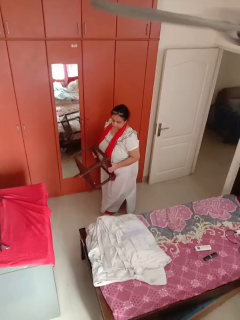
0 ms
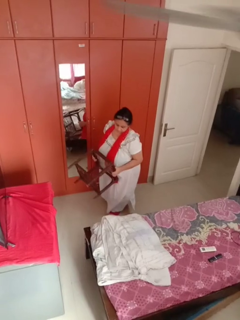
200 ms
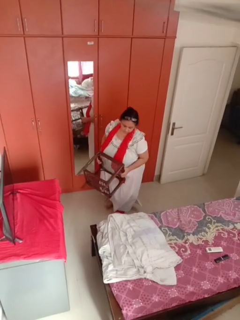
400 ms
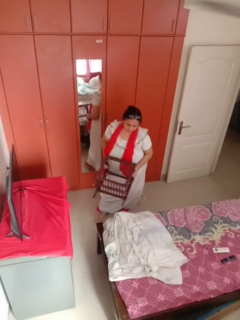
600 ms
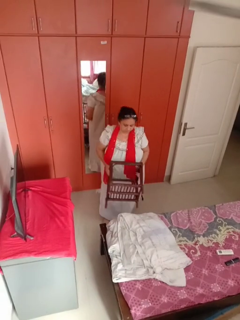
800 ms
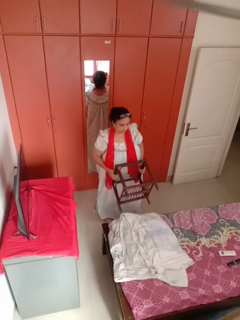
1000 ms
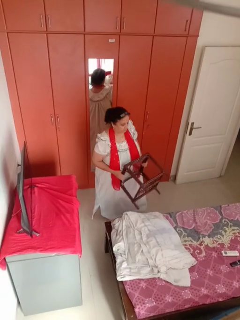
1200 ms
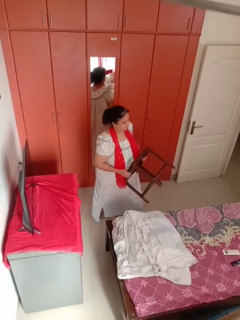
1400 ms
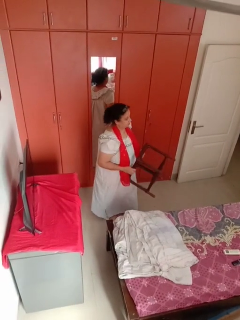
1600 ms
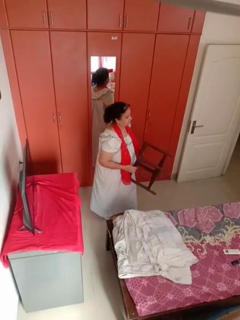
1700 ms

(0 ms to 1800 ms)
person carries furniture

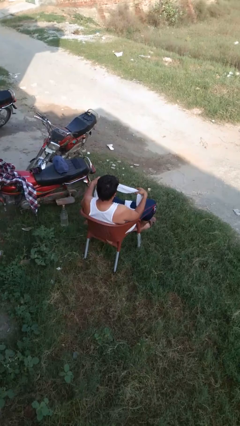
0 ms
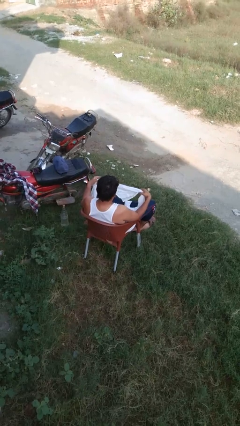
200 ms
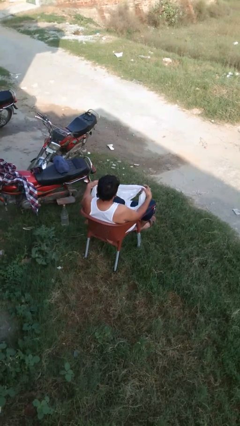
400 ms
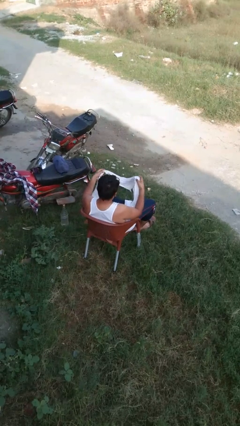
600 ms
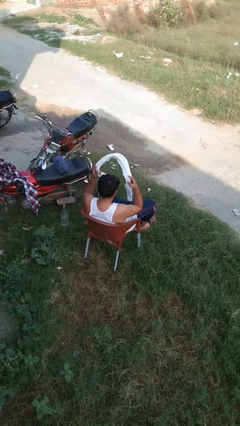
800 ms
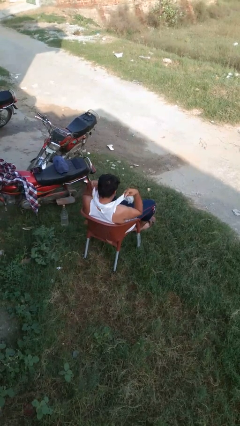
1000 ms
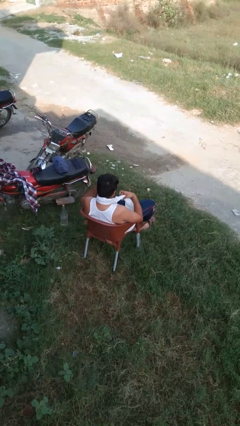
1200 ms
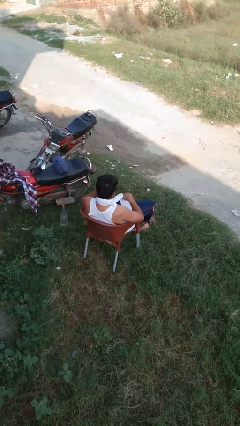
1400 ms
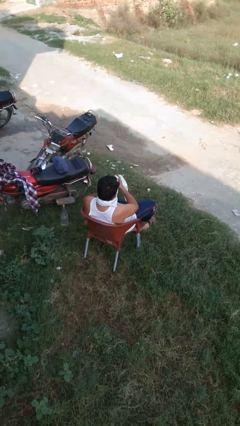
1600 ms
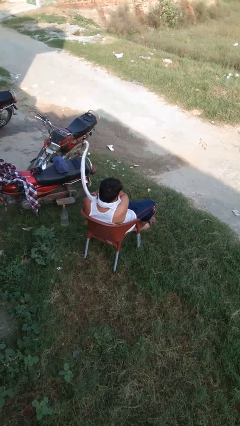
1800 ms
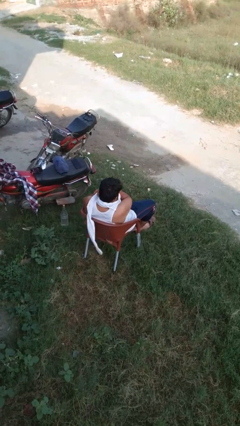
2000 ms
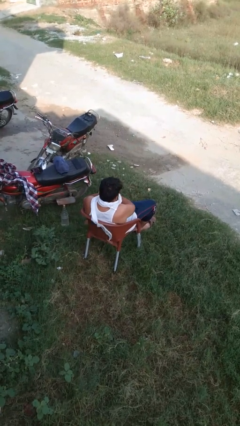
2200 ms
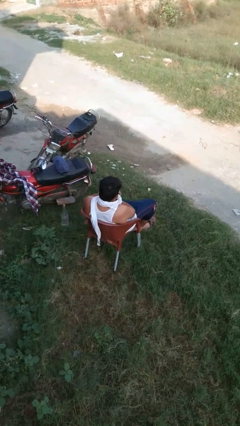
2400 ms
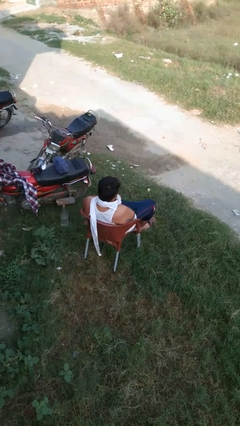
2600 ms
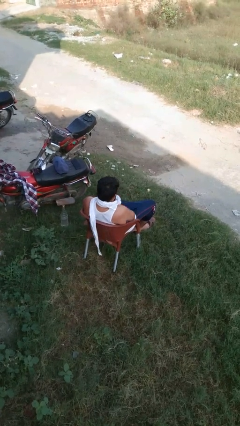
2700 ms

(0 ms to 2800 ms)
person puts on scarf

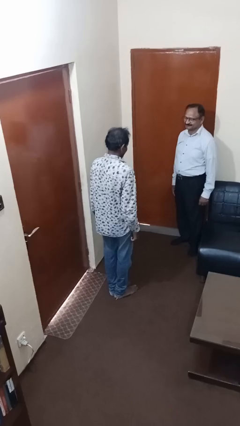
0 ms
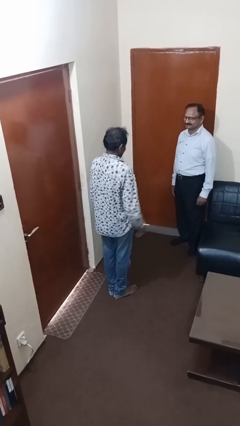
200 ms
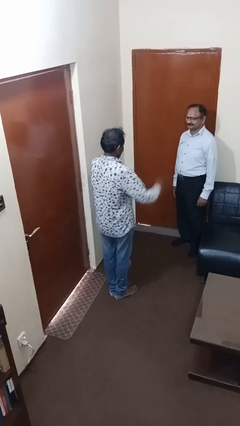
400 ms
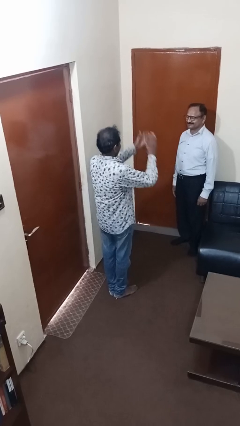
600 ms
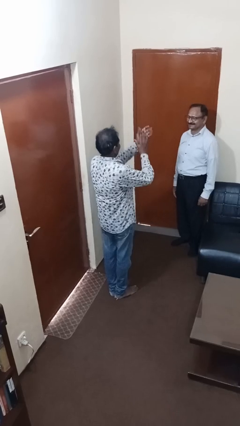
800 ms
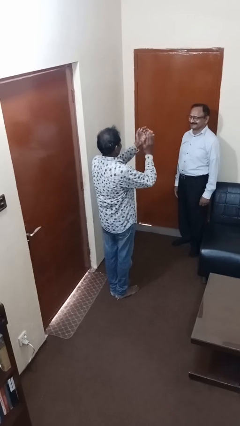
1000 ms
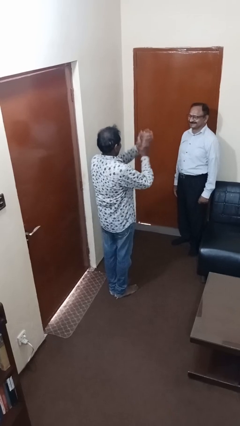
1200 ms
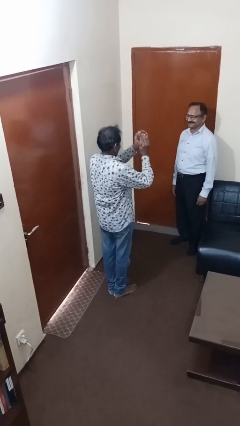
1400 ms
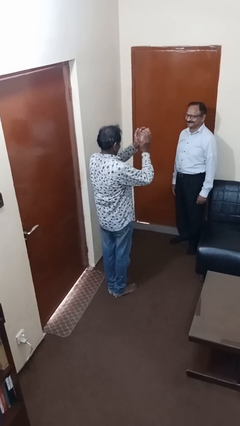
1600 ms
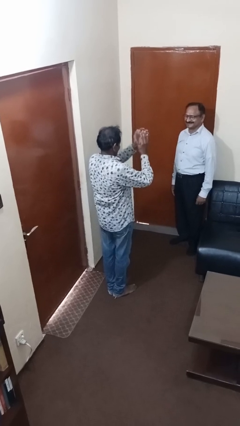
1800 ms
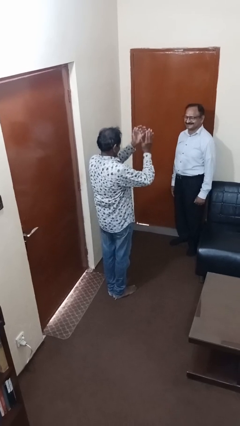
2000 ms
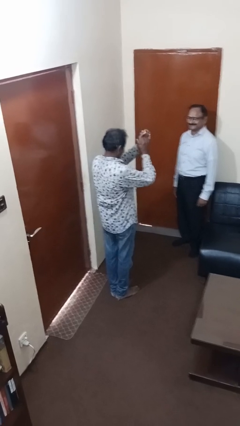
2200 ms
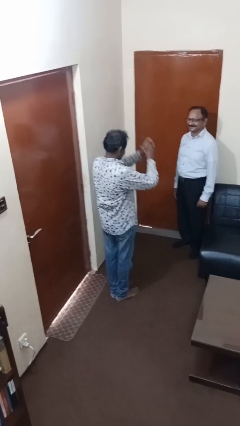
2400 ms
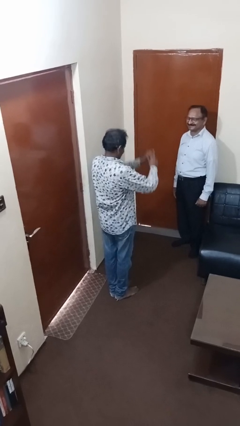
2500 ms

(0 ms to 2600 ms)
person laughs with person

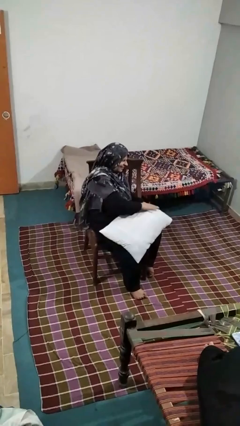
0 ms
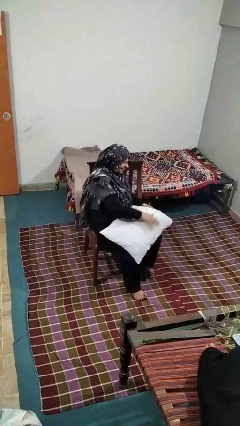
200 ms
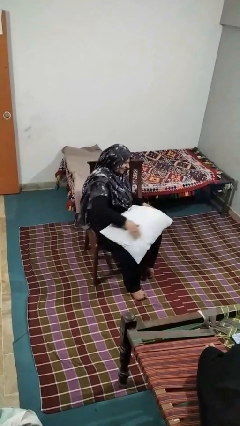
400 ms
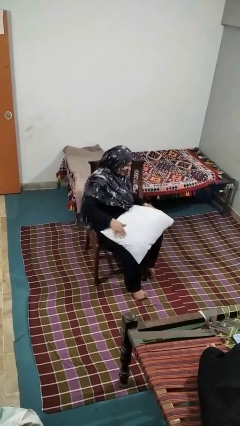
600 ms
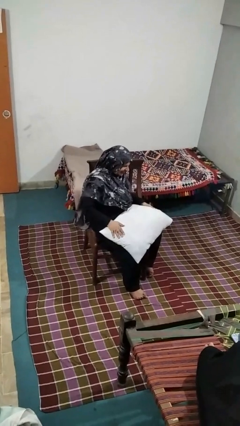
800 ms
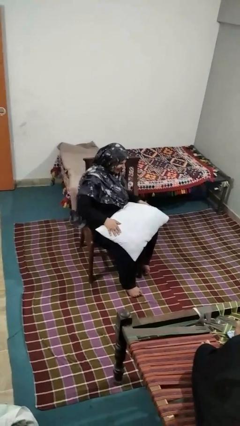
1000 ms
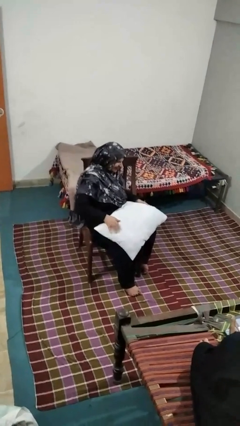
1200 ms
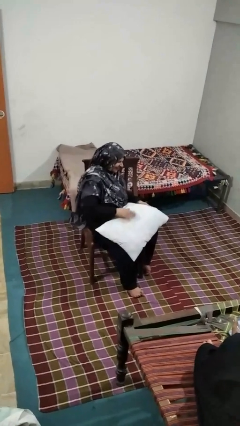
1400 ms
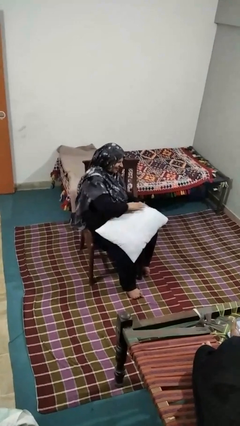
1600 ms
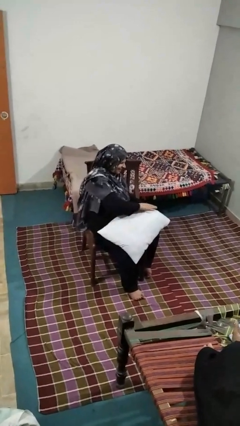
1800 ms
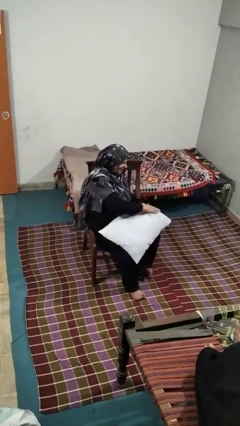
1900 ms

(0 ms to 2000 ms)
person waves hand over object

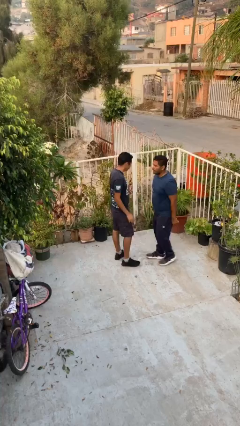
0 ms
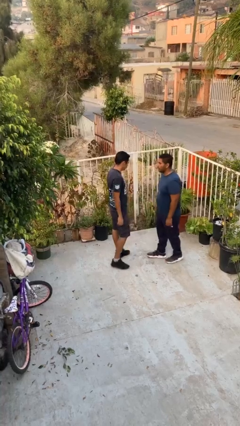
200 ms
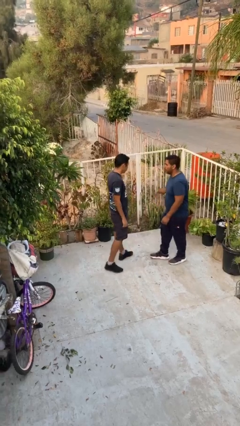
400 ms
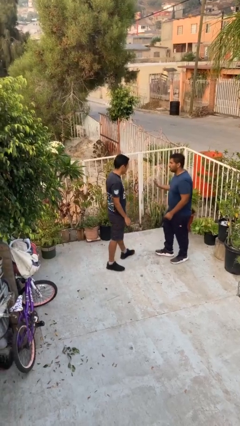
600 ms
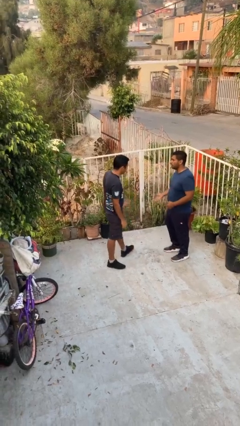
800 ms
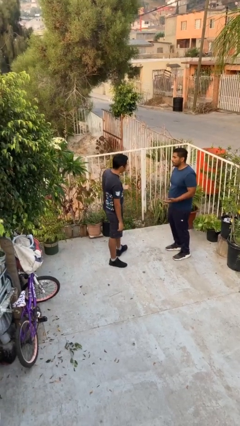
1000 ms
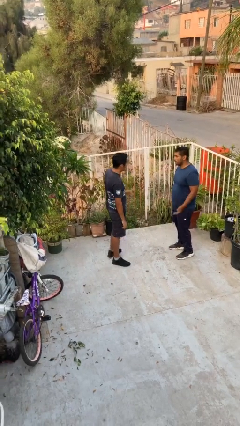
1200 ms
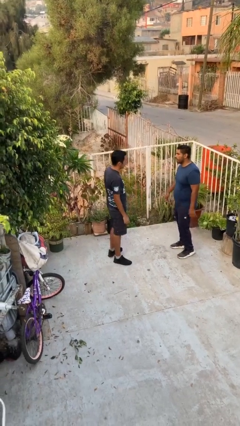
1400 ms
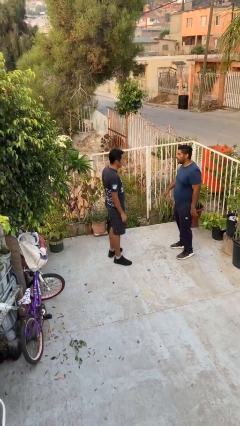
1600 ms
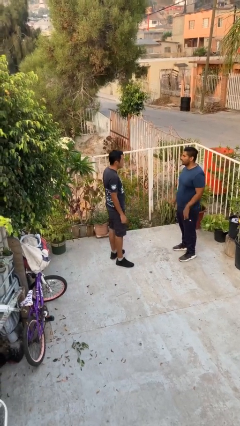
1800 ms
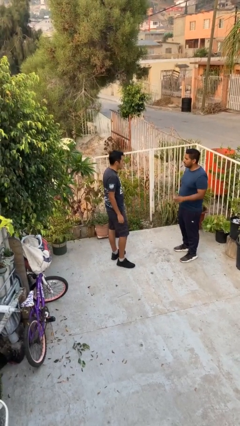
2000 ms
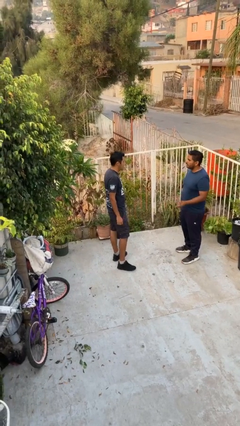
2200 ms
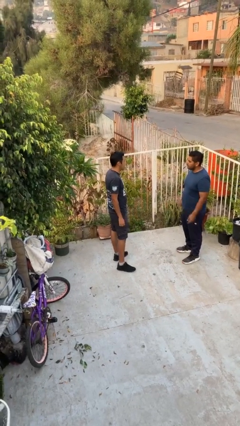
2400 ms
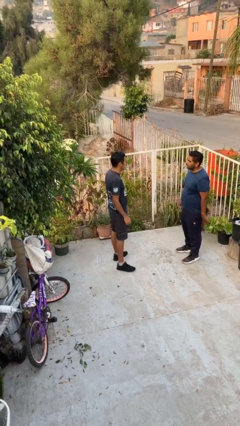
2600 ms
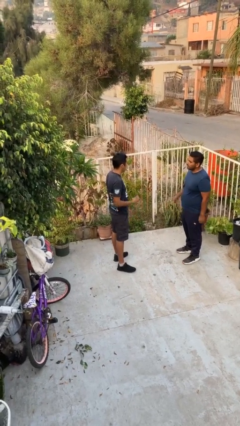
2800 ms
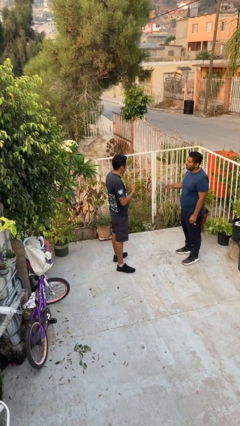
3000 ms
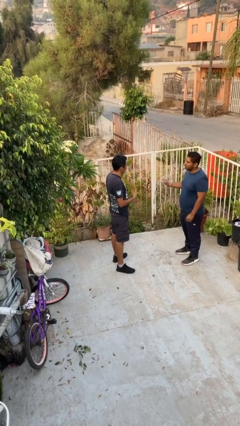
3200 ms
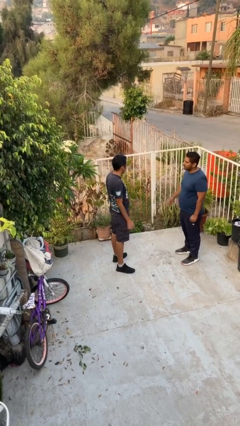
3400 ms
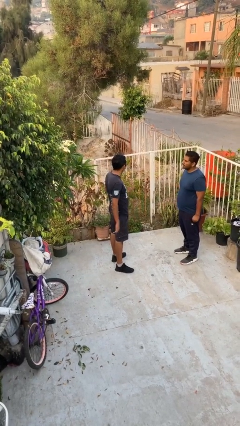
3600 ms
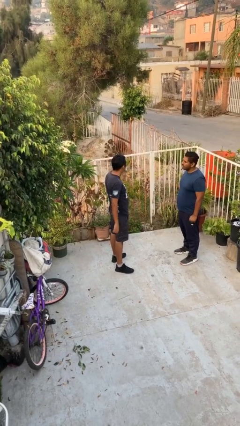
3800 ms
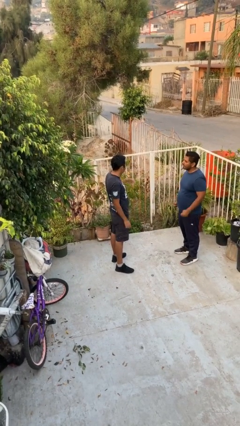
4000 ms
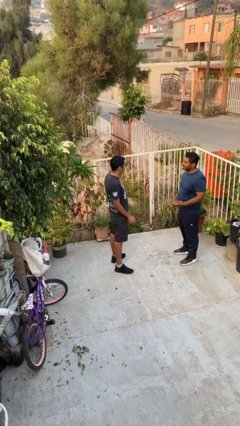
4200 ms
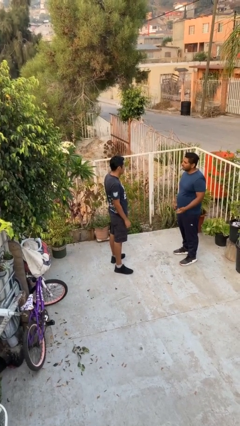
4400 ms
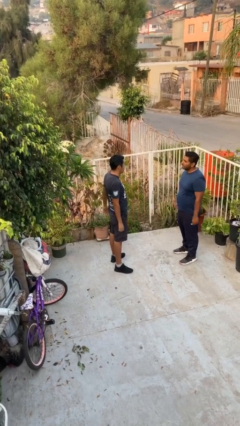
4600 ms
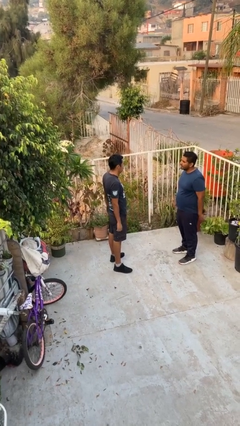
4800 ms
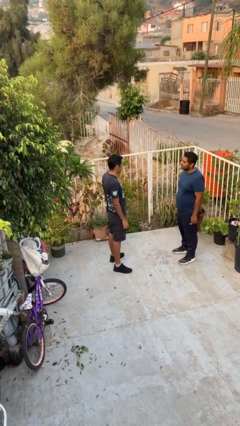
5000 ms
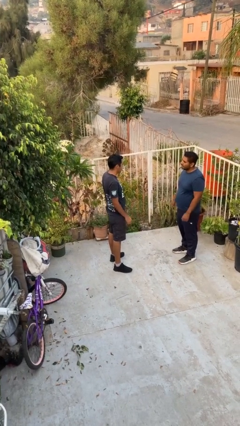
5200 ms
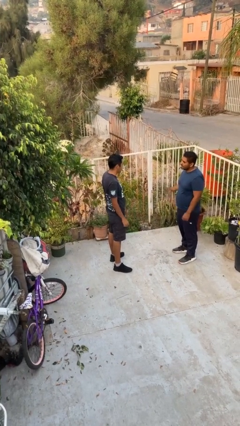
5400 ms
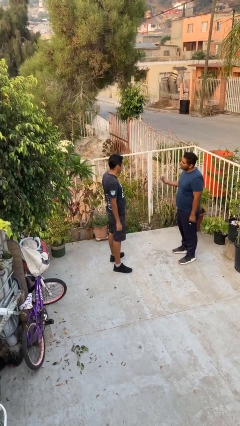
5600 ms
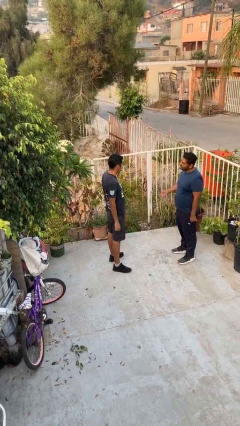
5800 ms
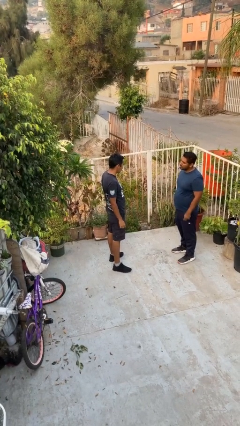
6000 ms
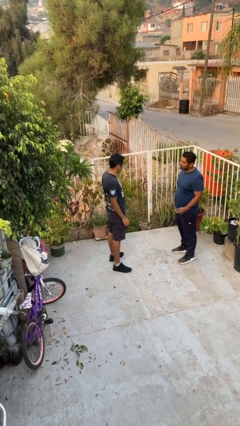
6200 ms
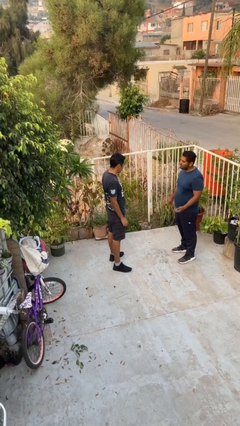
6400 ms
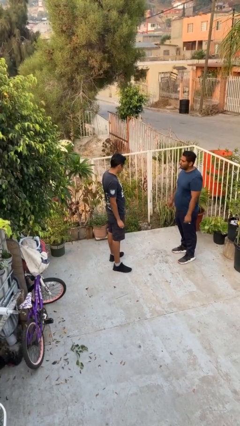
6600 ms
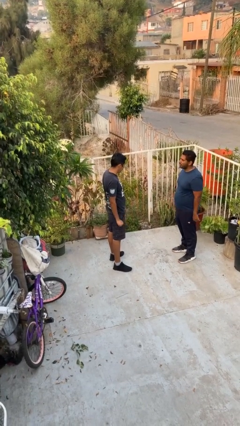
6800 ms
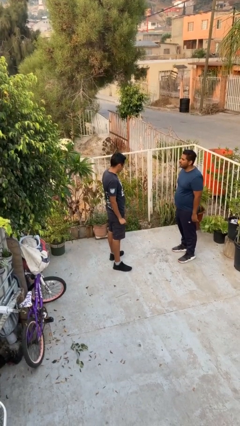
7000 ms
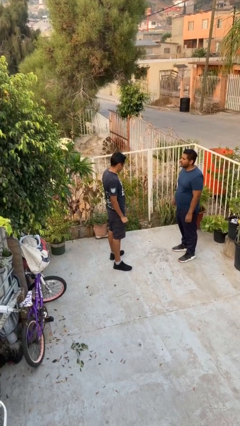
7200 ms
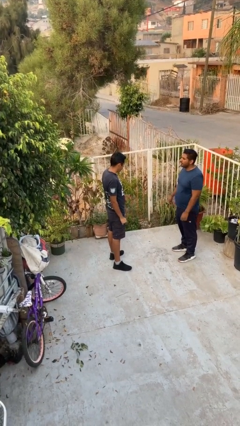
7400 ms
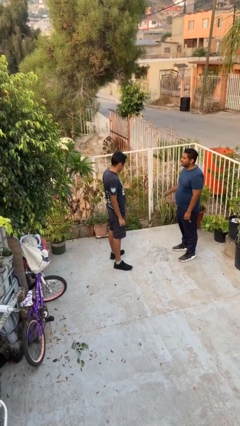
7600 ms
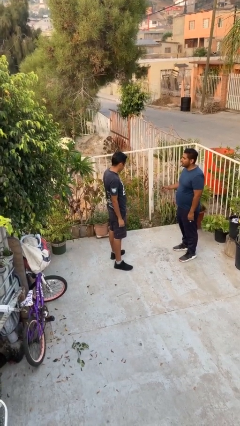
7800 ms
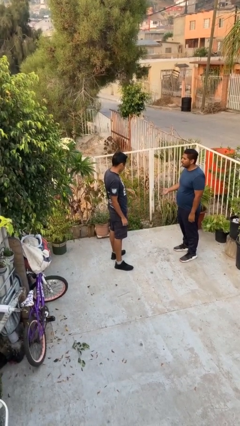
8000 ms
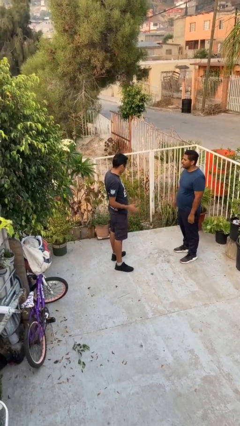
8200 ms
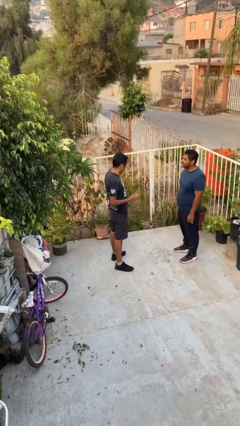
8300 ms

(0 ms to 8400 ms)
person talks to person

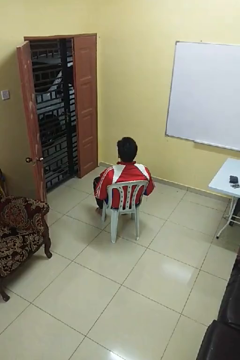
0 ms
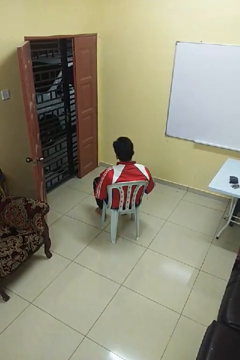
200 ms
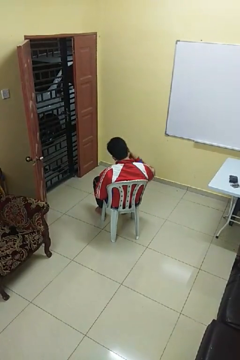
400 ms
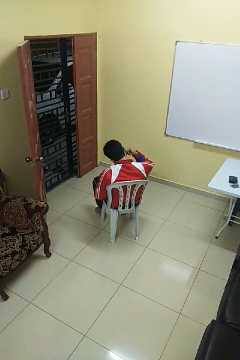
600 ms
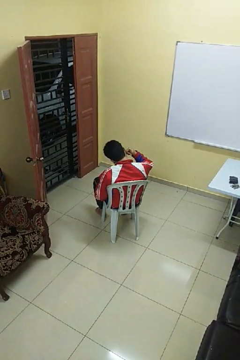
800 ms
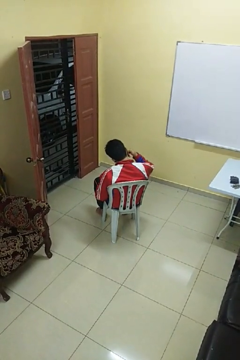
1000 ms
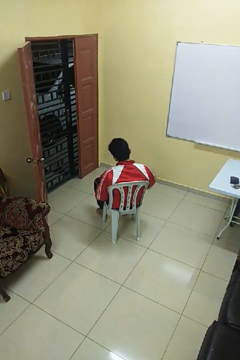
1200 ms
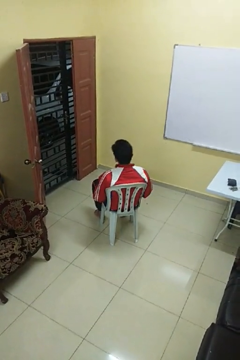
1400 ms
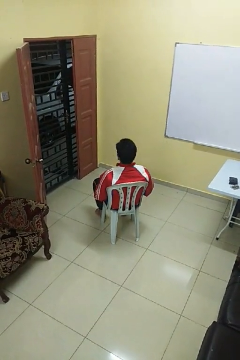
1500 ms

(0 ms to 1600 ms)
person gestures call me
